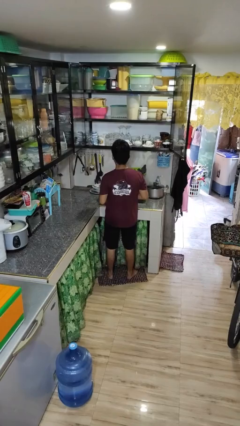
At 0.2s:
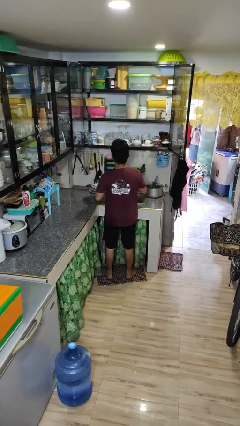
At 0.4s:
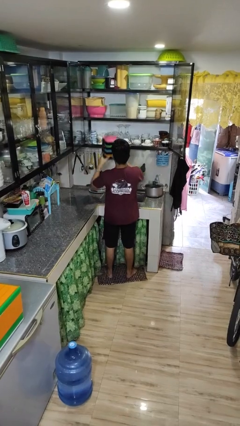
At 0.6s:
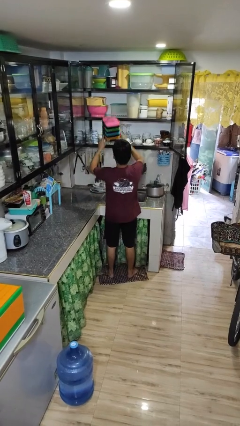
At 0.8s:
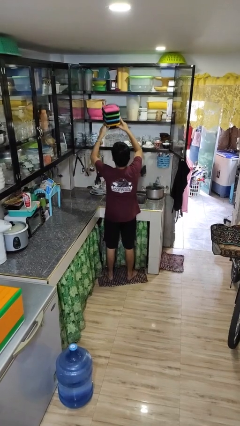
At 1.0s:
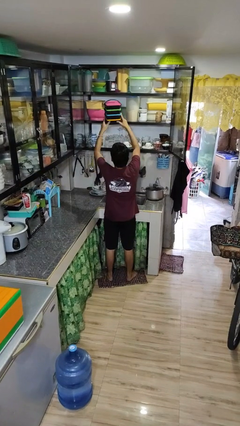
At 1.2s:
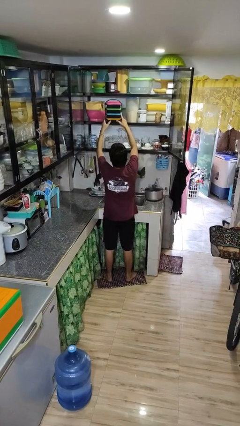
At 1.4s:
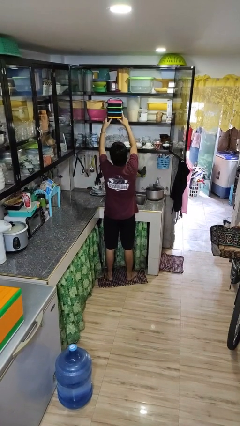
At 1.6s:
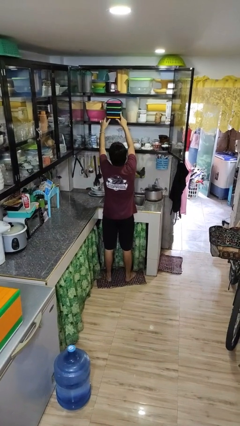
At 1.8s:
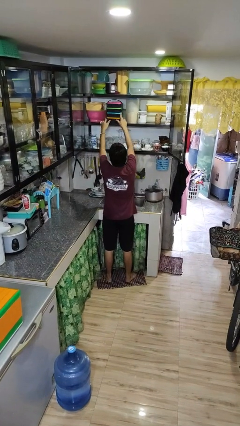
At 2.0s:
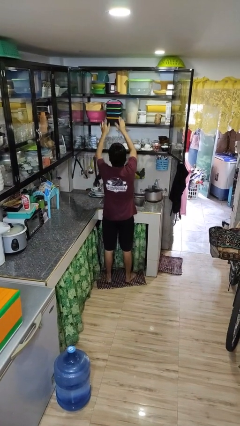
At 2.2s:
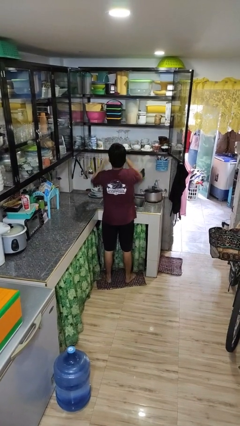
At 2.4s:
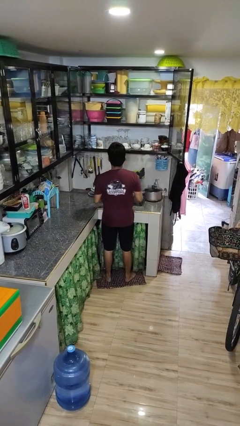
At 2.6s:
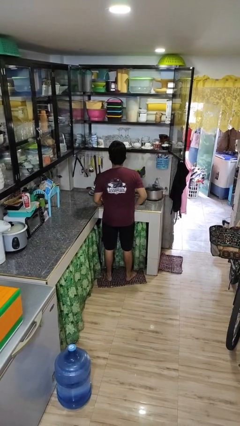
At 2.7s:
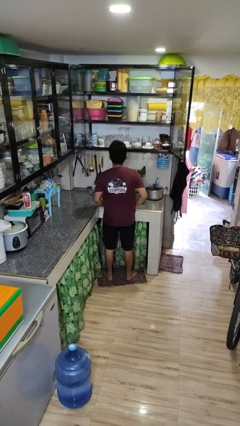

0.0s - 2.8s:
person puts down object into cabinet

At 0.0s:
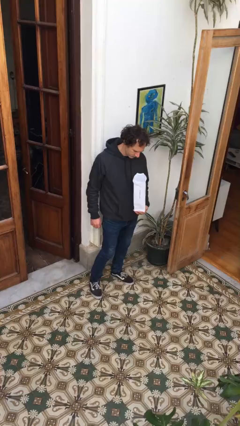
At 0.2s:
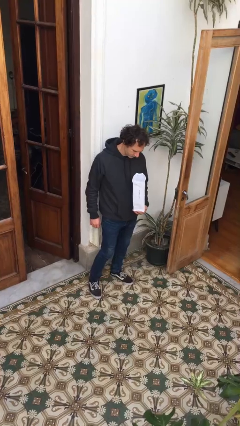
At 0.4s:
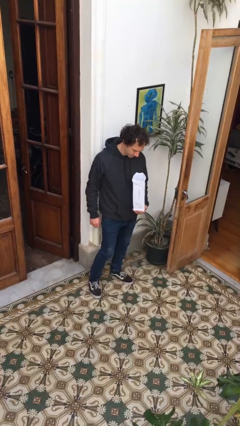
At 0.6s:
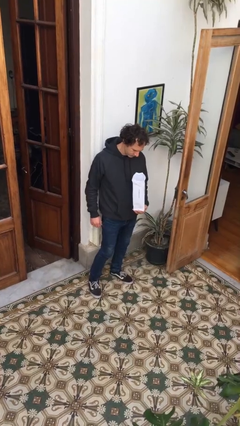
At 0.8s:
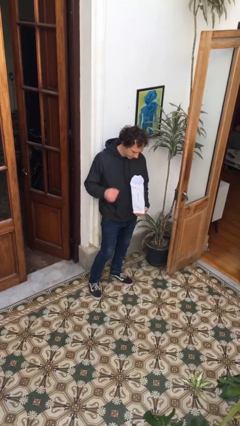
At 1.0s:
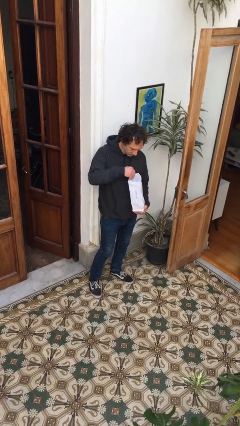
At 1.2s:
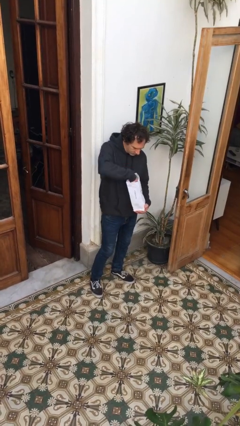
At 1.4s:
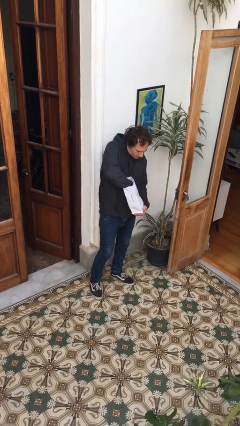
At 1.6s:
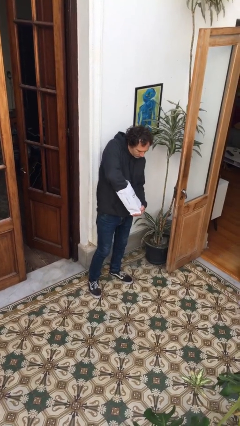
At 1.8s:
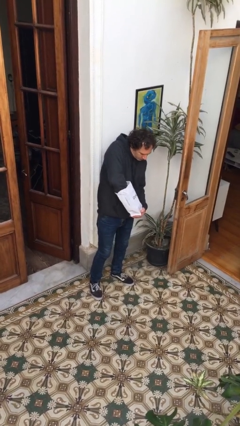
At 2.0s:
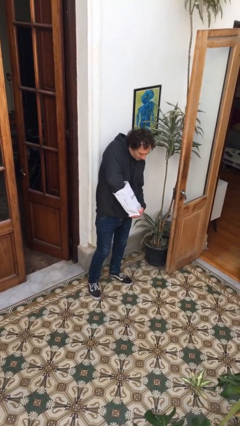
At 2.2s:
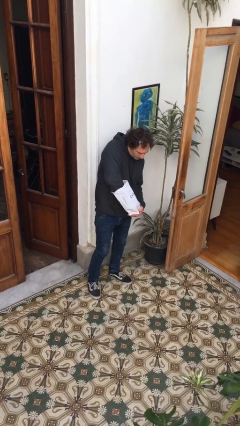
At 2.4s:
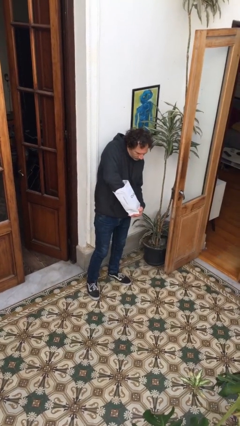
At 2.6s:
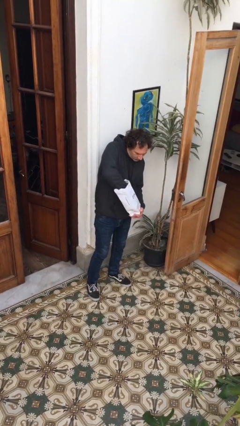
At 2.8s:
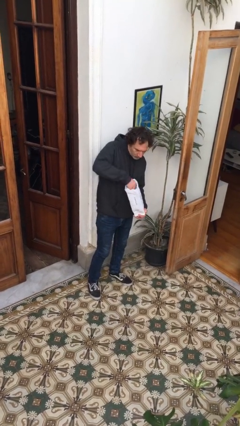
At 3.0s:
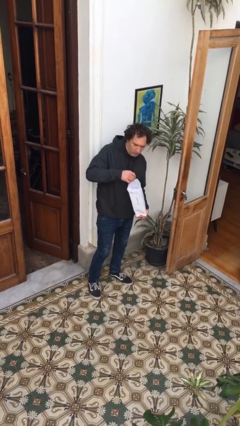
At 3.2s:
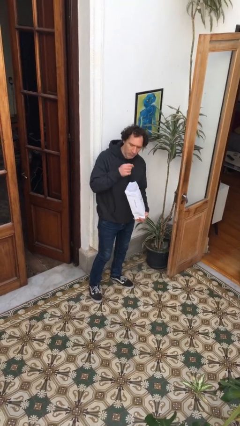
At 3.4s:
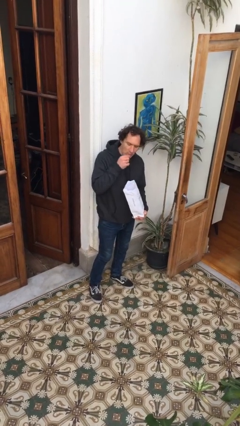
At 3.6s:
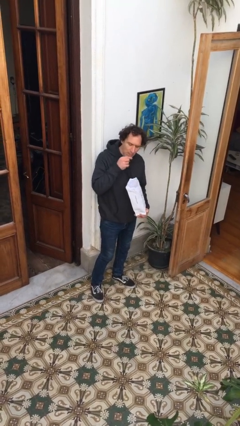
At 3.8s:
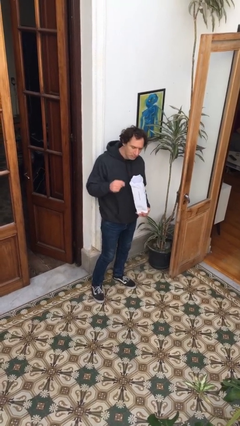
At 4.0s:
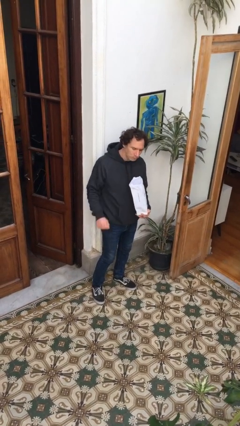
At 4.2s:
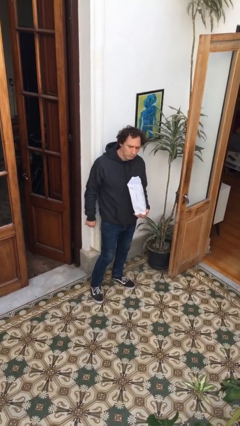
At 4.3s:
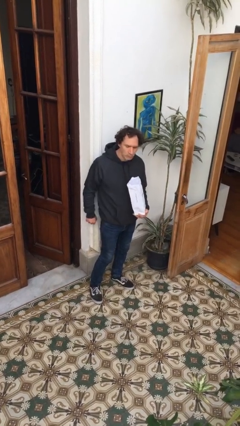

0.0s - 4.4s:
person eats snack from bag

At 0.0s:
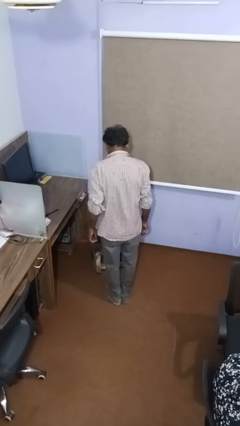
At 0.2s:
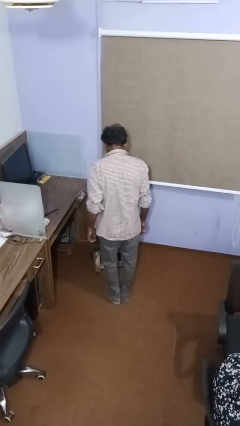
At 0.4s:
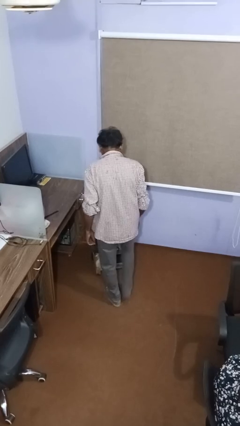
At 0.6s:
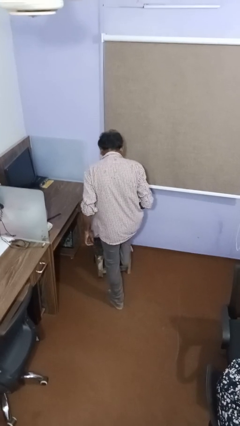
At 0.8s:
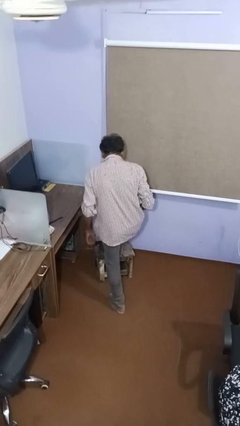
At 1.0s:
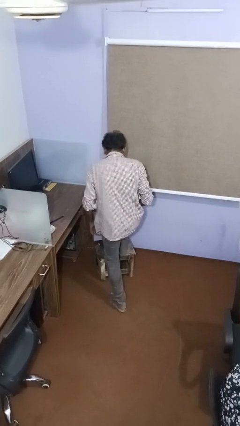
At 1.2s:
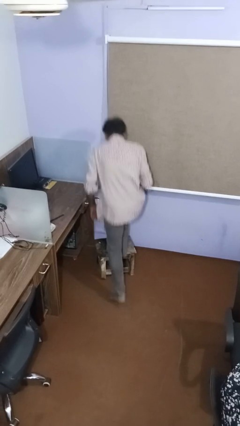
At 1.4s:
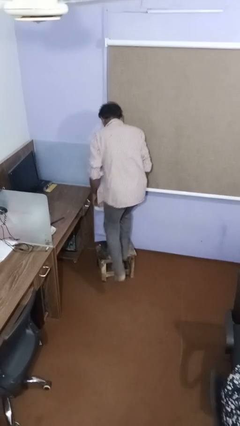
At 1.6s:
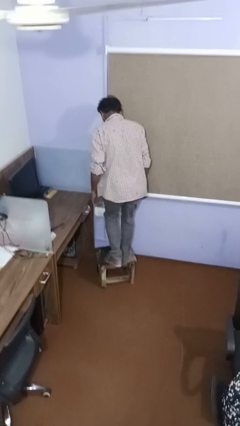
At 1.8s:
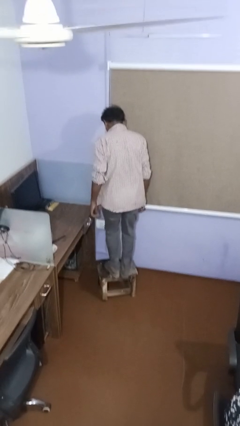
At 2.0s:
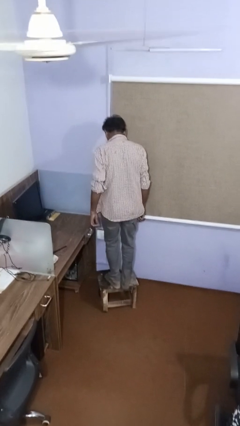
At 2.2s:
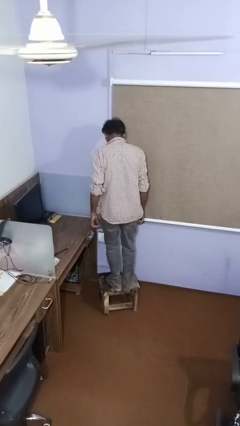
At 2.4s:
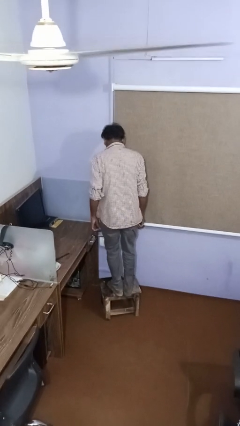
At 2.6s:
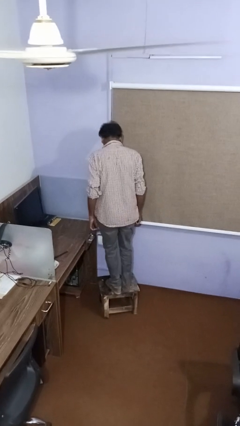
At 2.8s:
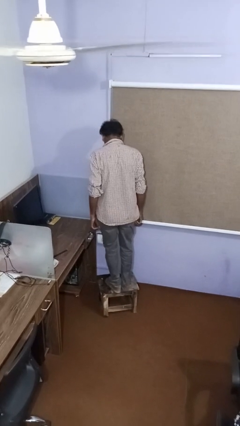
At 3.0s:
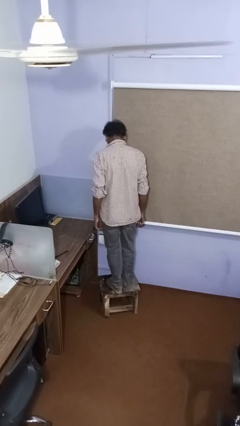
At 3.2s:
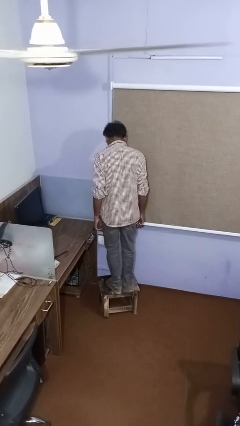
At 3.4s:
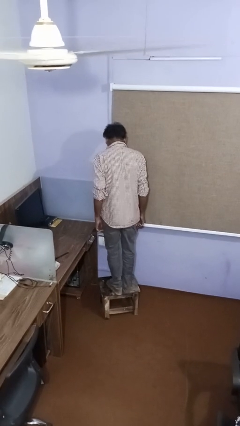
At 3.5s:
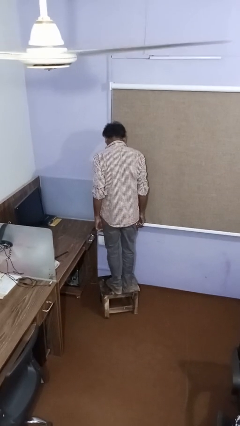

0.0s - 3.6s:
person climbs on table

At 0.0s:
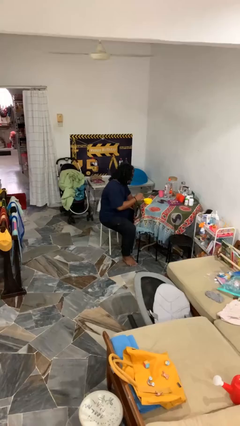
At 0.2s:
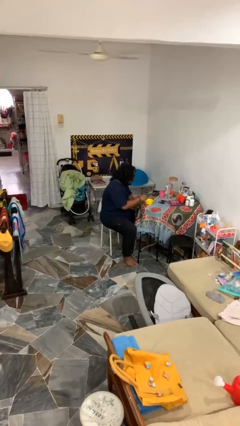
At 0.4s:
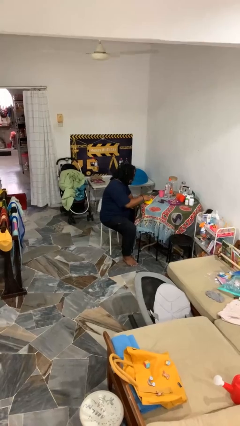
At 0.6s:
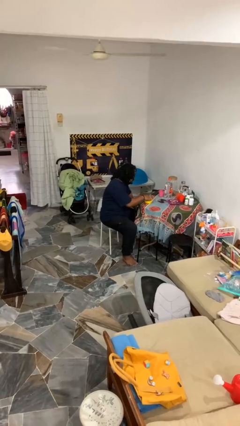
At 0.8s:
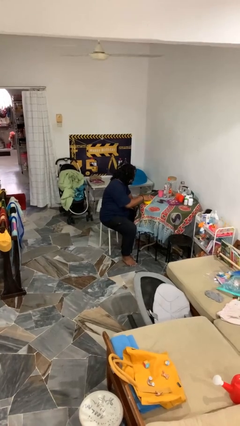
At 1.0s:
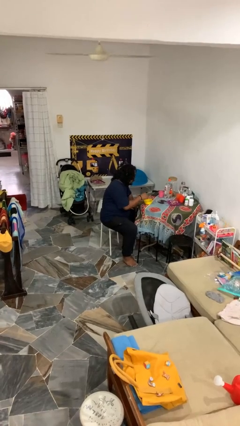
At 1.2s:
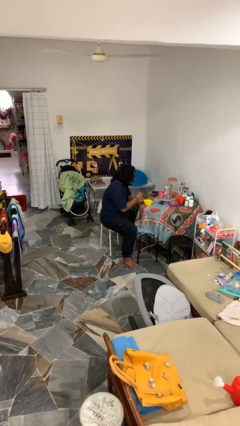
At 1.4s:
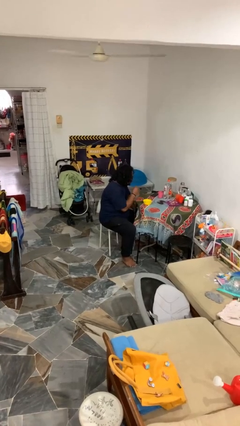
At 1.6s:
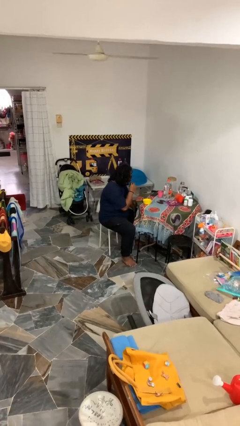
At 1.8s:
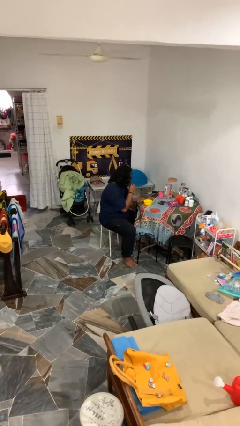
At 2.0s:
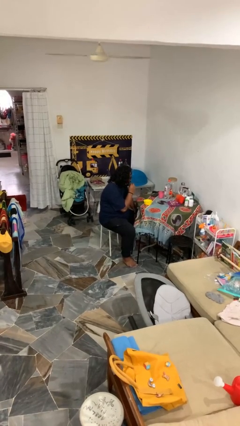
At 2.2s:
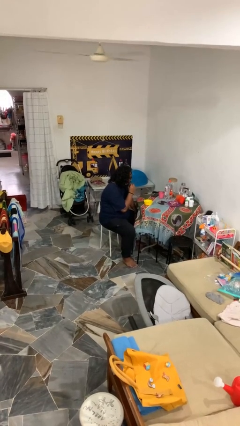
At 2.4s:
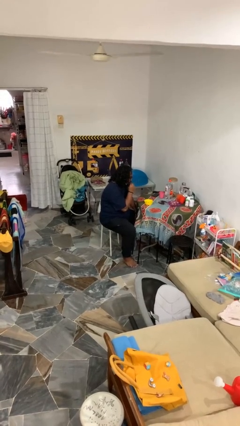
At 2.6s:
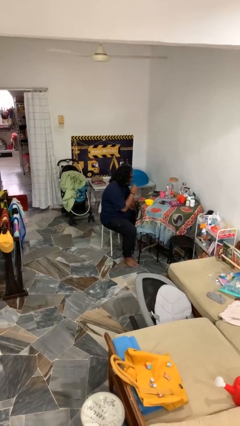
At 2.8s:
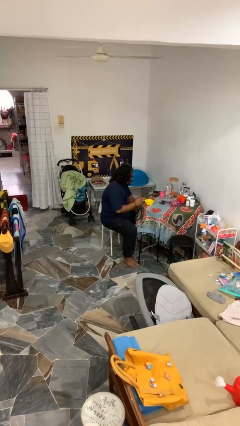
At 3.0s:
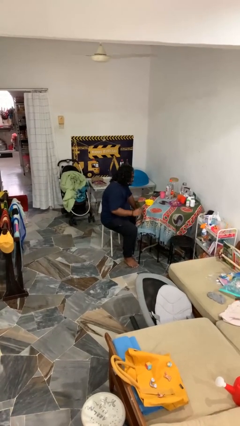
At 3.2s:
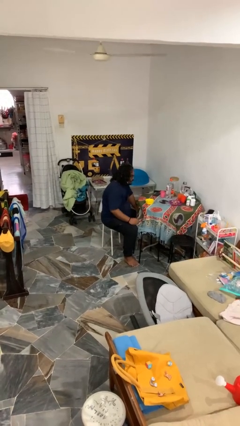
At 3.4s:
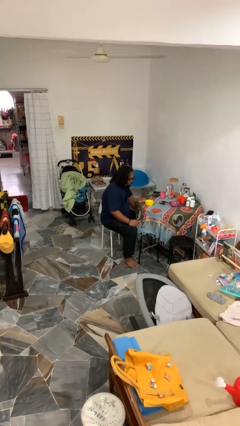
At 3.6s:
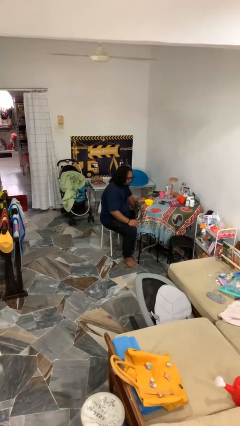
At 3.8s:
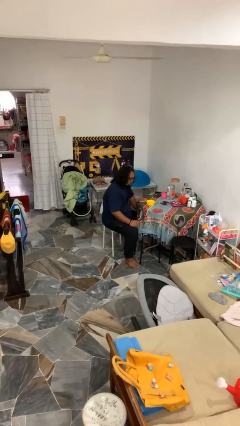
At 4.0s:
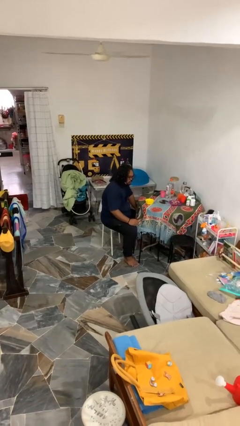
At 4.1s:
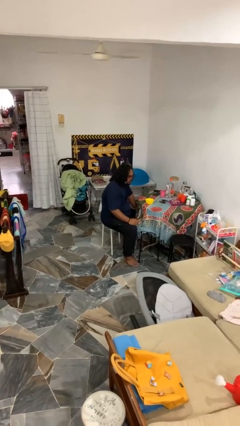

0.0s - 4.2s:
person eats with hands

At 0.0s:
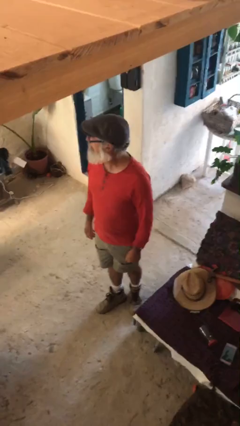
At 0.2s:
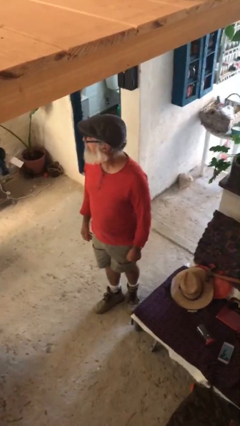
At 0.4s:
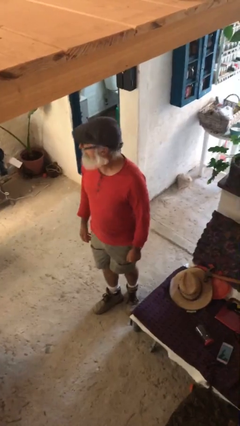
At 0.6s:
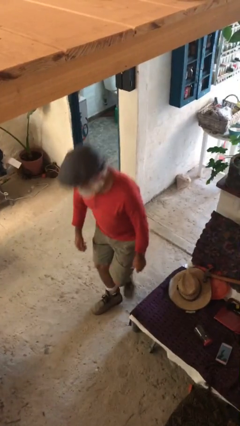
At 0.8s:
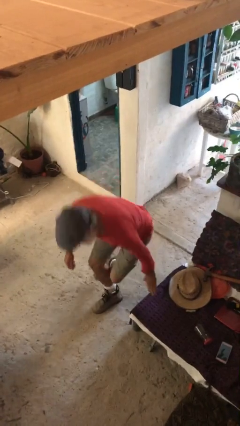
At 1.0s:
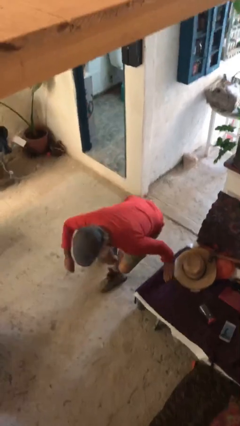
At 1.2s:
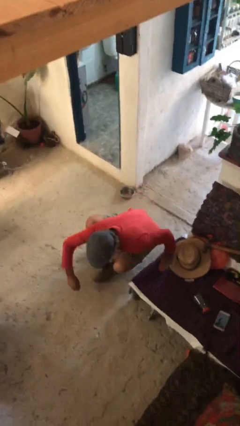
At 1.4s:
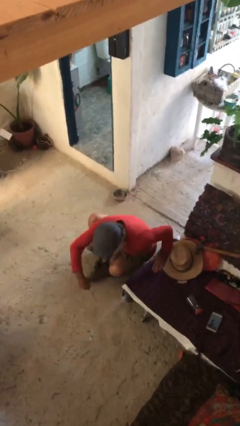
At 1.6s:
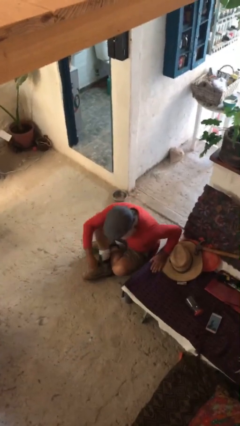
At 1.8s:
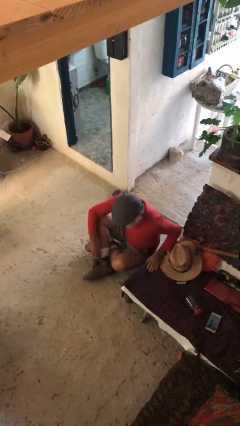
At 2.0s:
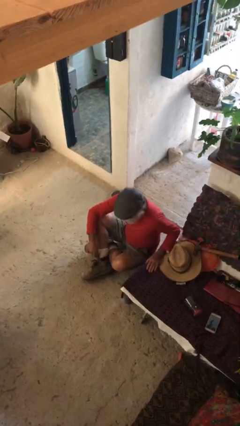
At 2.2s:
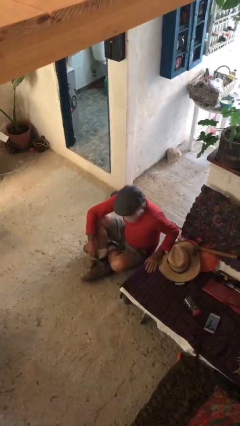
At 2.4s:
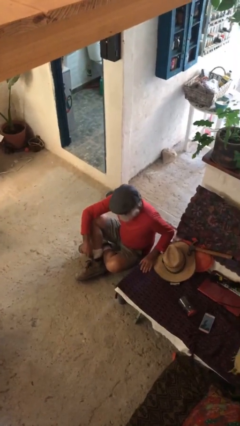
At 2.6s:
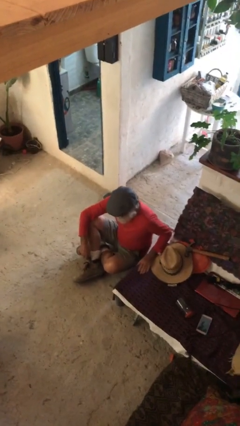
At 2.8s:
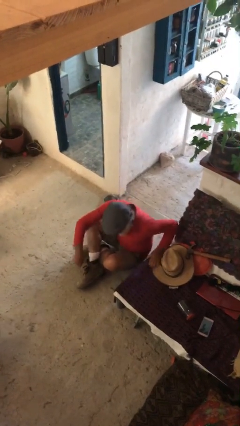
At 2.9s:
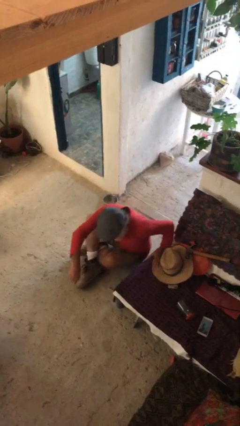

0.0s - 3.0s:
person sits down
